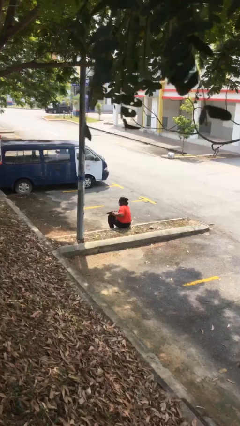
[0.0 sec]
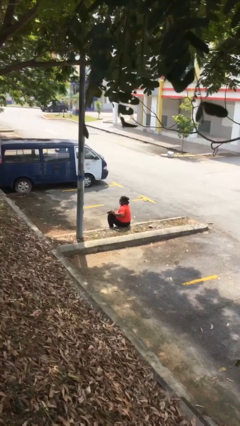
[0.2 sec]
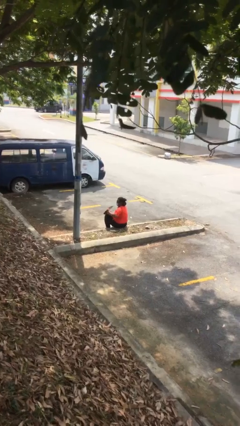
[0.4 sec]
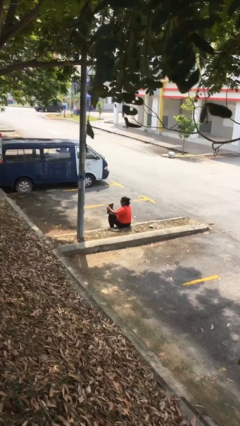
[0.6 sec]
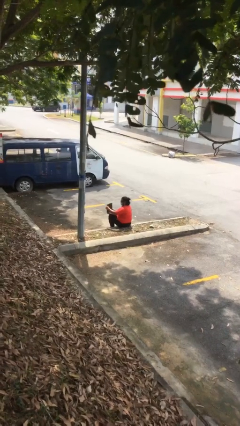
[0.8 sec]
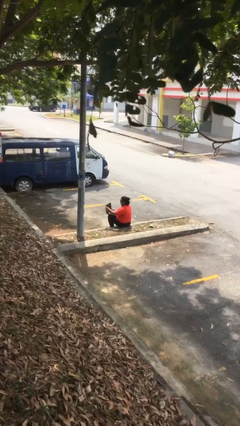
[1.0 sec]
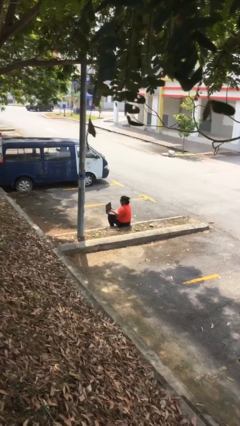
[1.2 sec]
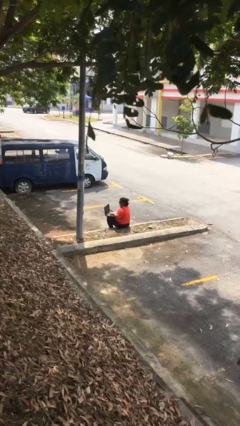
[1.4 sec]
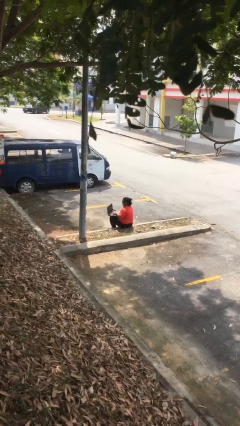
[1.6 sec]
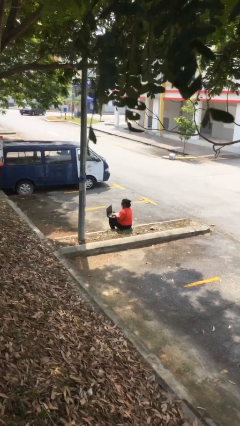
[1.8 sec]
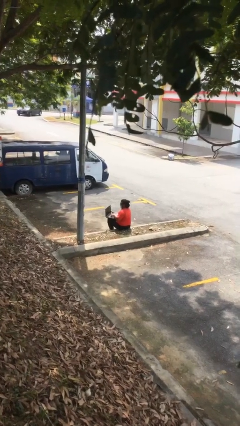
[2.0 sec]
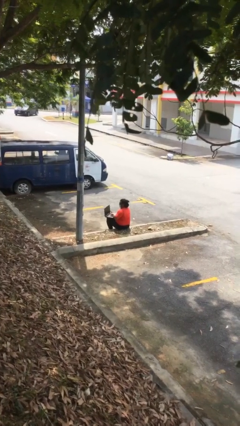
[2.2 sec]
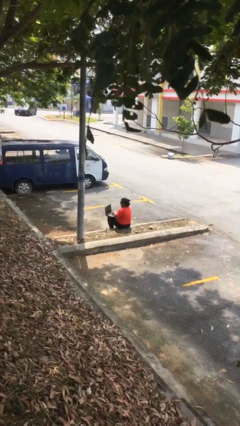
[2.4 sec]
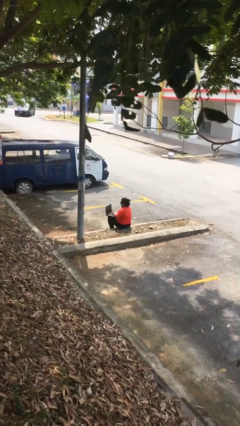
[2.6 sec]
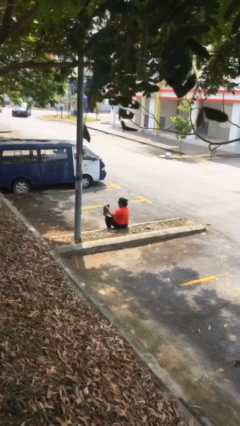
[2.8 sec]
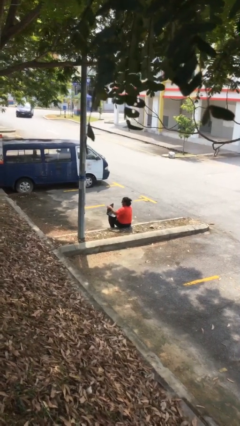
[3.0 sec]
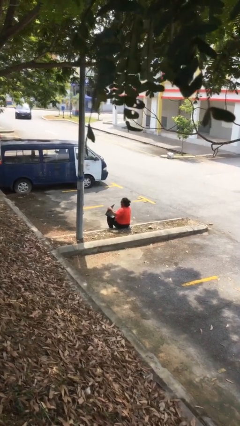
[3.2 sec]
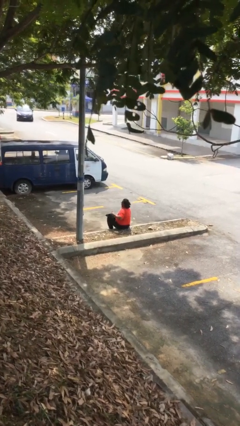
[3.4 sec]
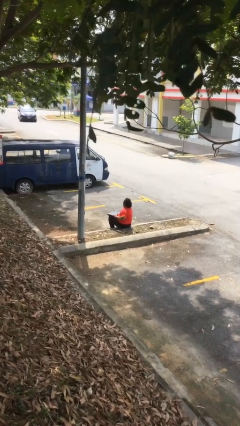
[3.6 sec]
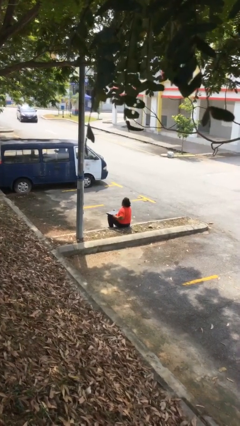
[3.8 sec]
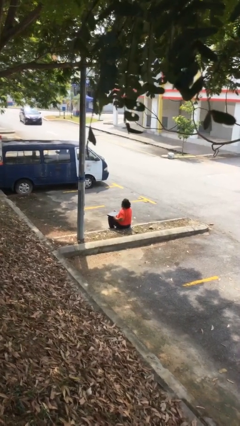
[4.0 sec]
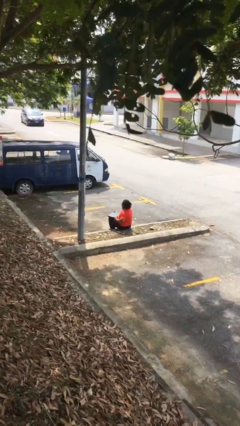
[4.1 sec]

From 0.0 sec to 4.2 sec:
person interacts with laptop

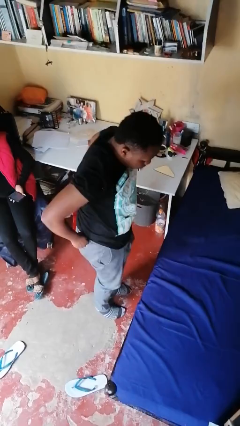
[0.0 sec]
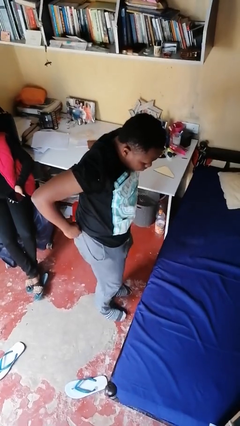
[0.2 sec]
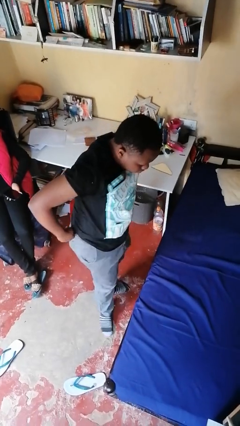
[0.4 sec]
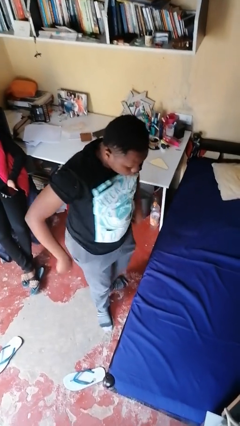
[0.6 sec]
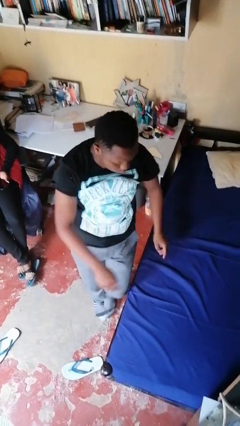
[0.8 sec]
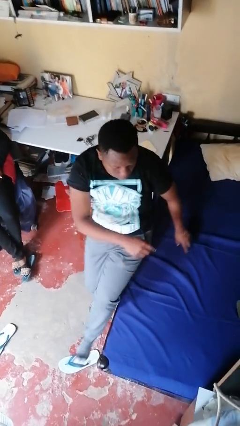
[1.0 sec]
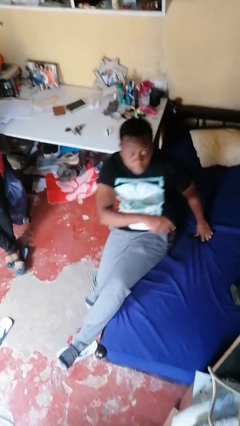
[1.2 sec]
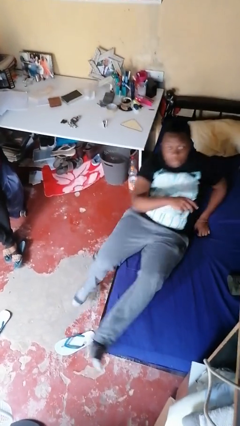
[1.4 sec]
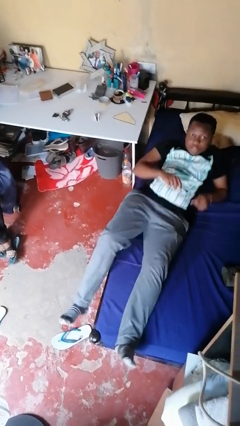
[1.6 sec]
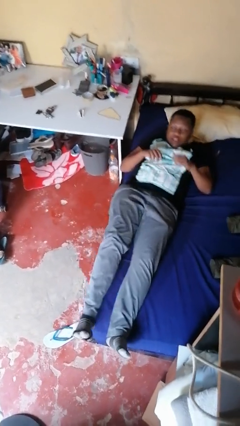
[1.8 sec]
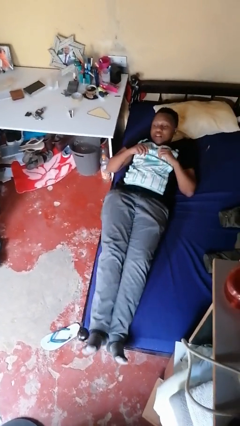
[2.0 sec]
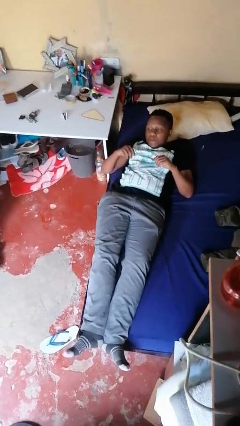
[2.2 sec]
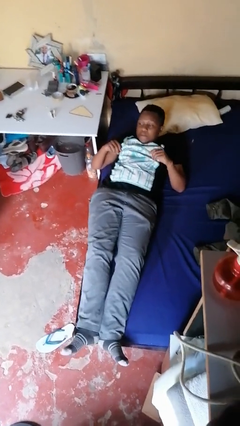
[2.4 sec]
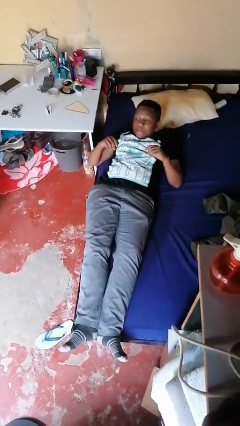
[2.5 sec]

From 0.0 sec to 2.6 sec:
person lies down on bed

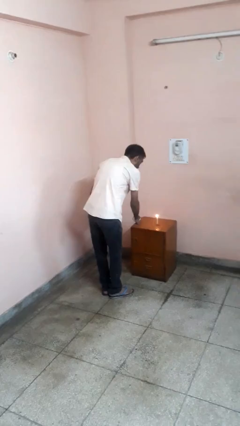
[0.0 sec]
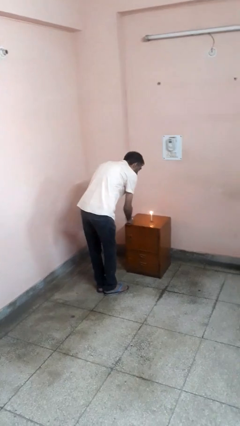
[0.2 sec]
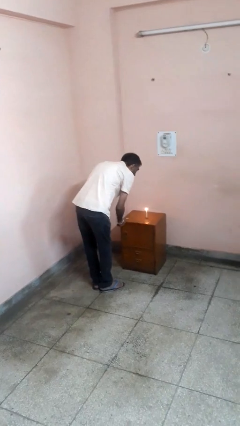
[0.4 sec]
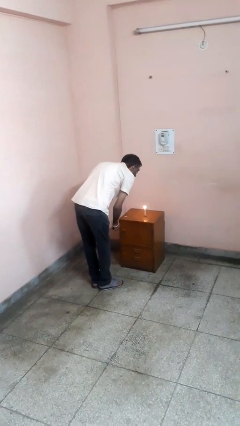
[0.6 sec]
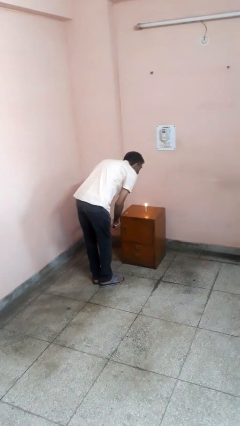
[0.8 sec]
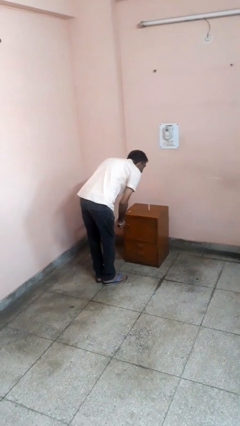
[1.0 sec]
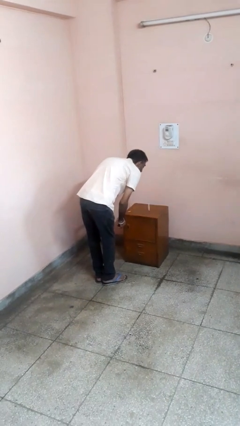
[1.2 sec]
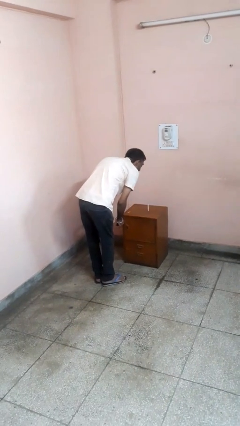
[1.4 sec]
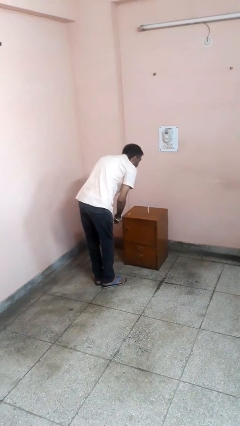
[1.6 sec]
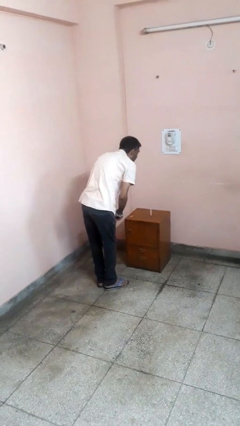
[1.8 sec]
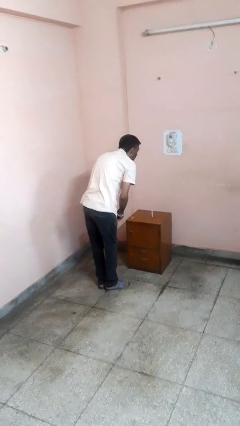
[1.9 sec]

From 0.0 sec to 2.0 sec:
person extinguishes candle

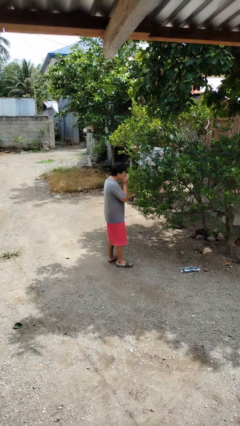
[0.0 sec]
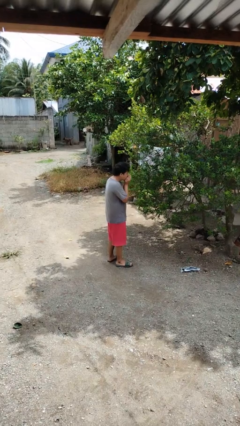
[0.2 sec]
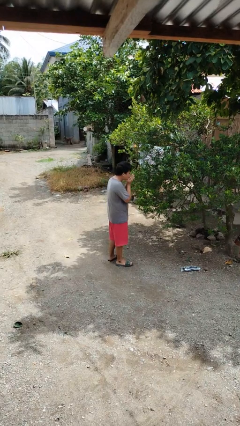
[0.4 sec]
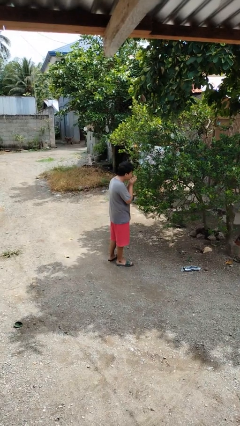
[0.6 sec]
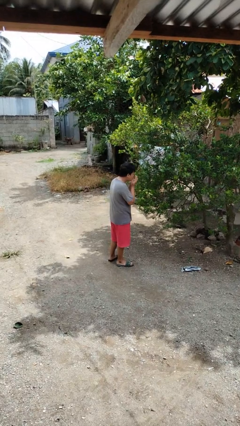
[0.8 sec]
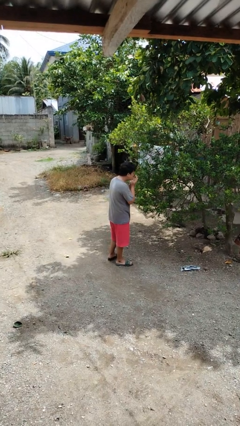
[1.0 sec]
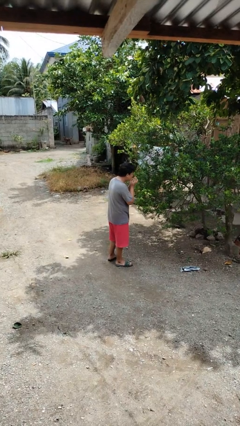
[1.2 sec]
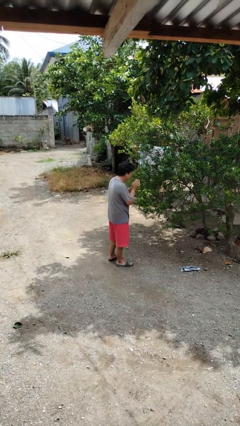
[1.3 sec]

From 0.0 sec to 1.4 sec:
person blows into hands

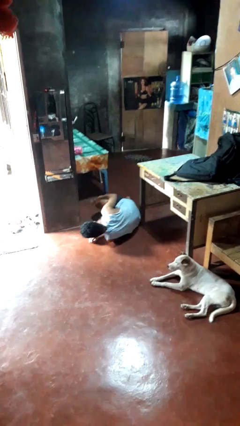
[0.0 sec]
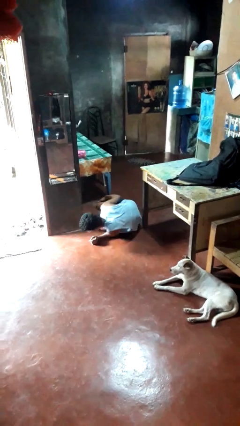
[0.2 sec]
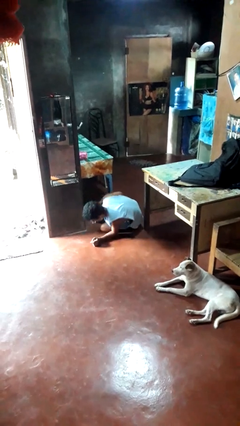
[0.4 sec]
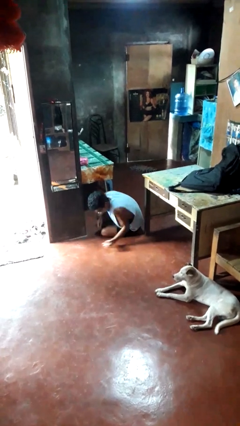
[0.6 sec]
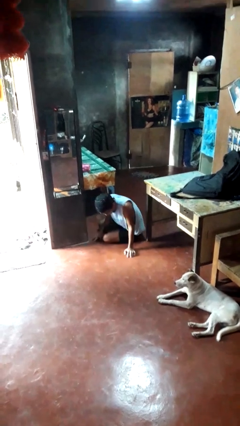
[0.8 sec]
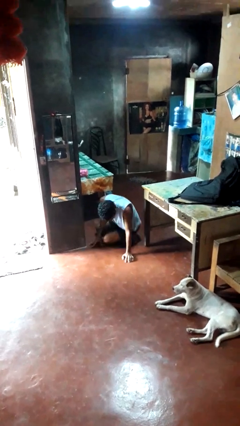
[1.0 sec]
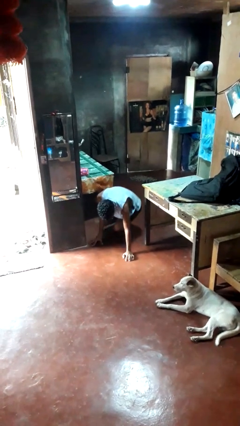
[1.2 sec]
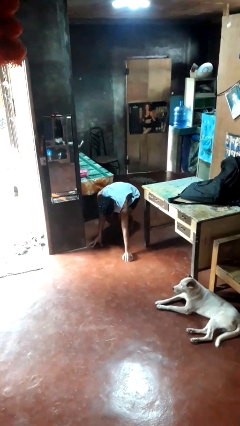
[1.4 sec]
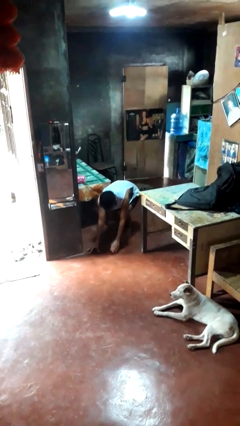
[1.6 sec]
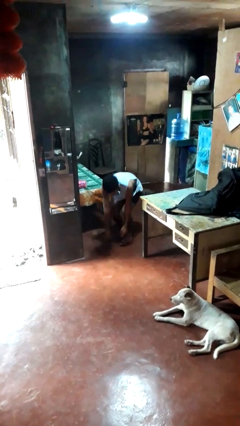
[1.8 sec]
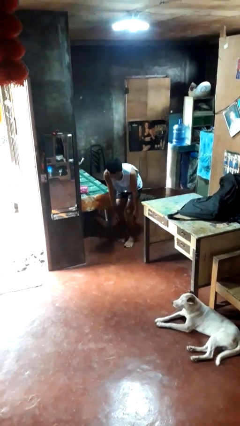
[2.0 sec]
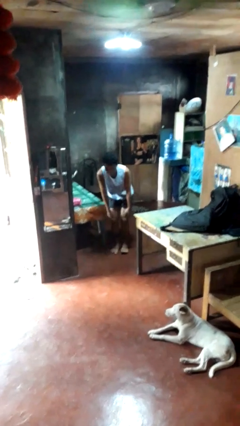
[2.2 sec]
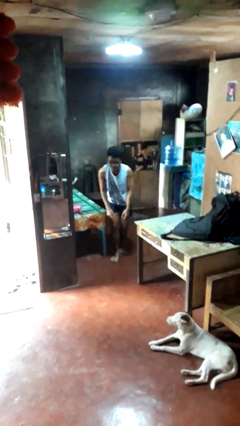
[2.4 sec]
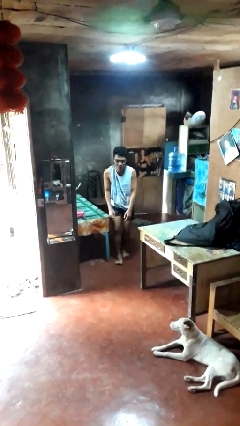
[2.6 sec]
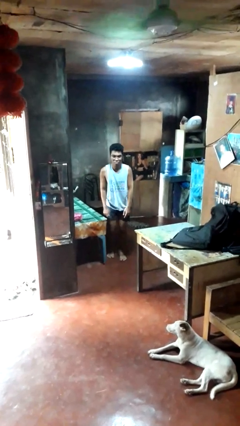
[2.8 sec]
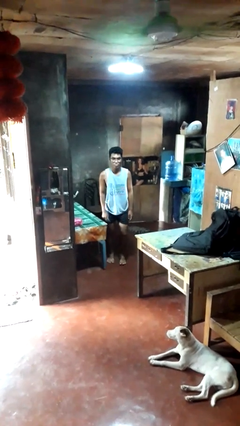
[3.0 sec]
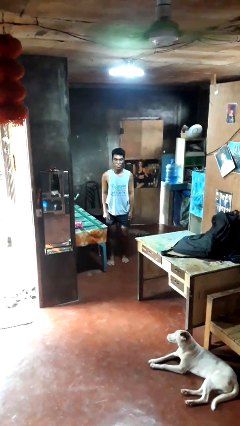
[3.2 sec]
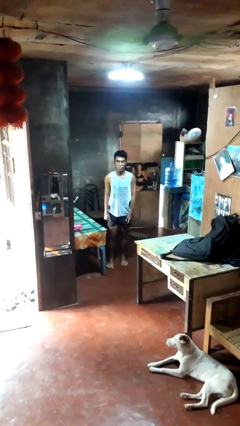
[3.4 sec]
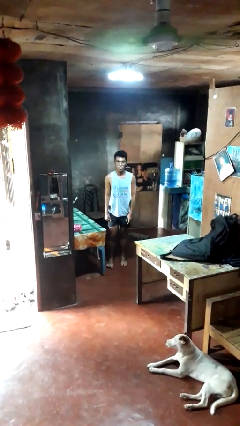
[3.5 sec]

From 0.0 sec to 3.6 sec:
person stands up from floor

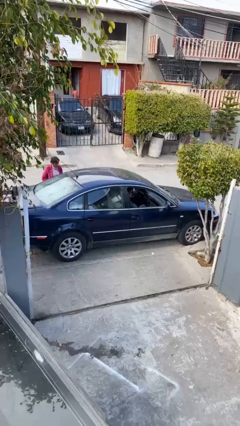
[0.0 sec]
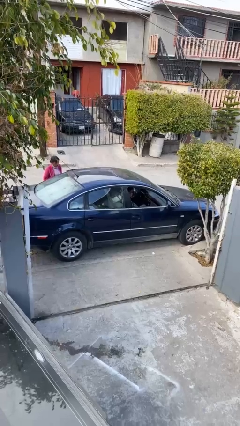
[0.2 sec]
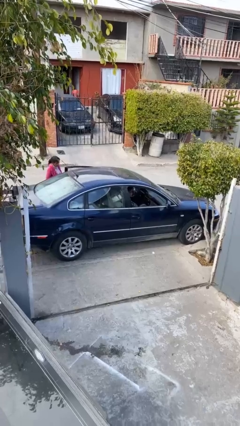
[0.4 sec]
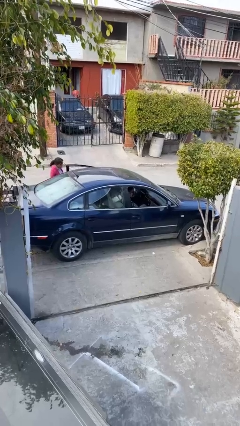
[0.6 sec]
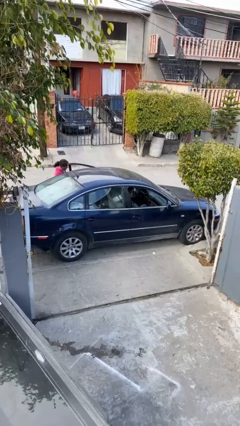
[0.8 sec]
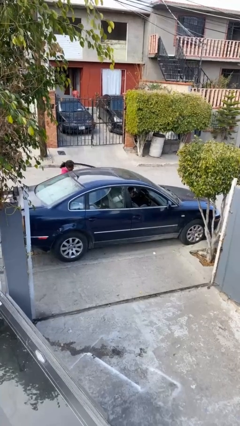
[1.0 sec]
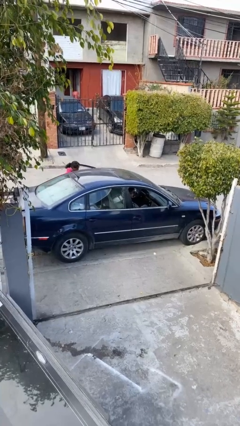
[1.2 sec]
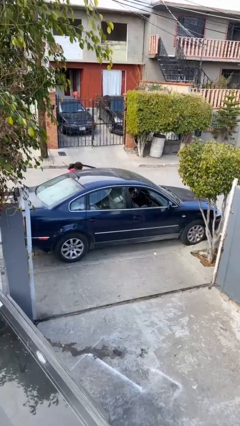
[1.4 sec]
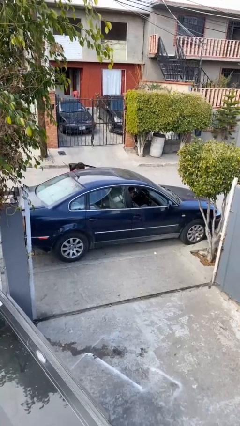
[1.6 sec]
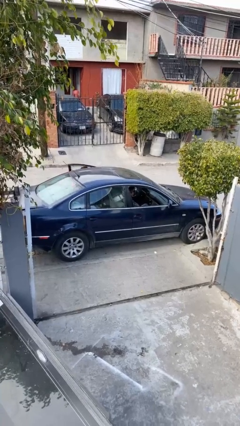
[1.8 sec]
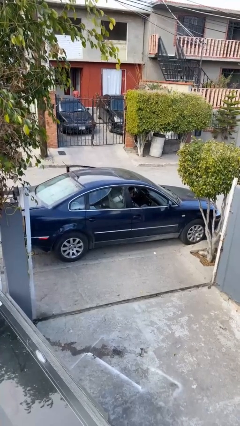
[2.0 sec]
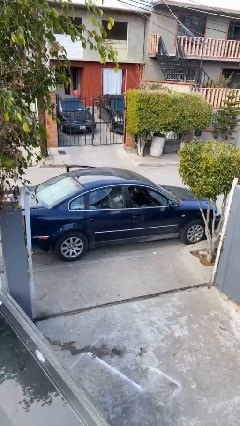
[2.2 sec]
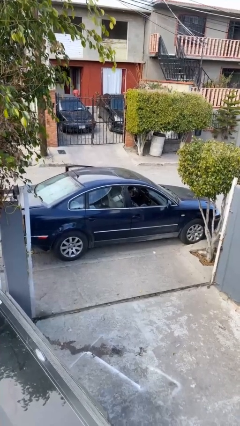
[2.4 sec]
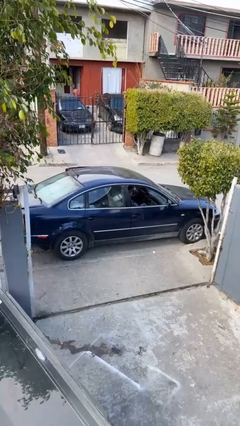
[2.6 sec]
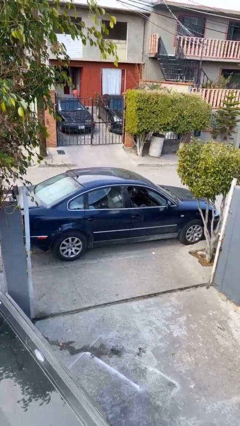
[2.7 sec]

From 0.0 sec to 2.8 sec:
car picks up person

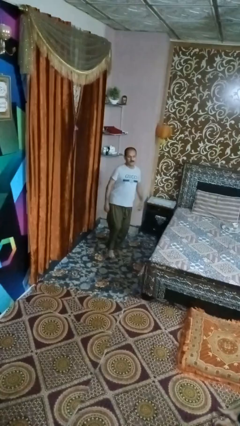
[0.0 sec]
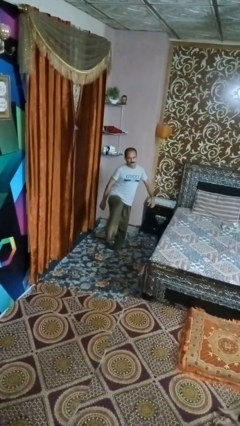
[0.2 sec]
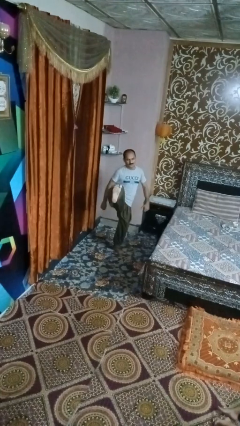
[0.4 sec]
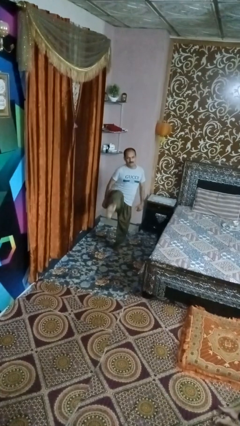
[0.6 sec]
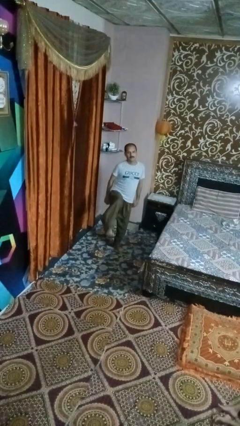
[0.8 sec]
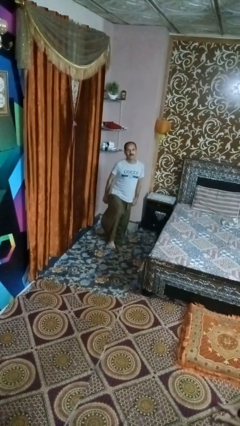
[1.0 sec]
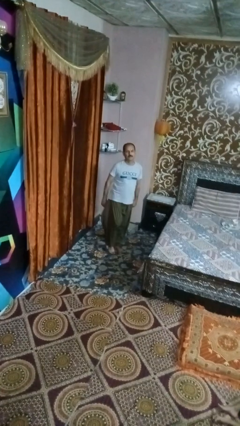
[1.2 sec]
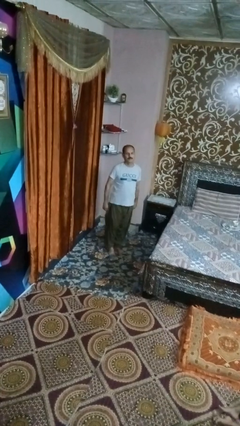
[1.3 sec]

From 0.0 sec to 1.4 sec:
person karate kicks
